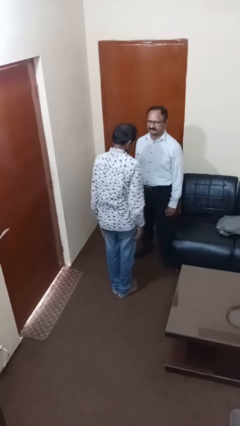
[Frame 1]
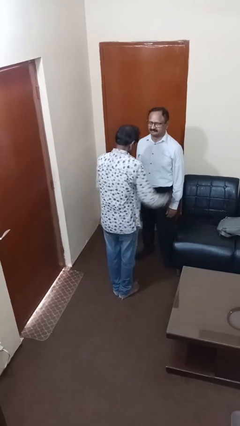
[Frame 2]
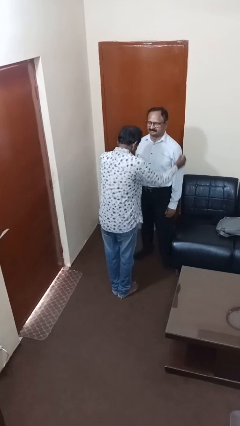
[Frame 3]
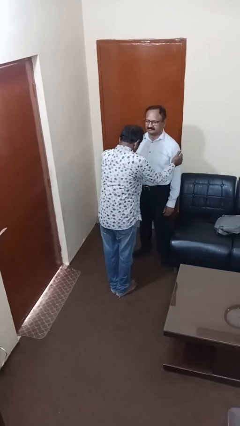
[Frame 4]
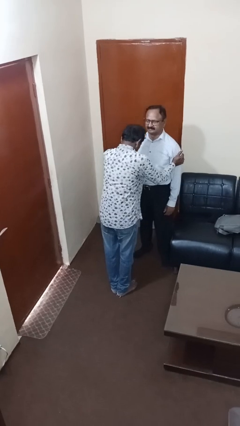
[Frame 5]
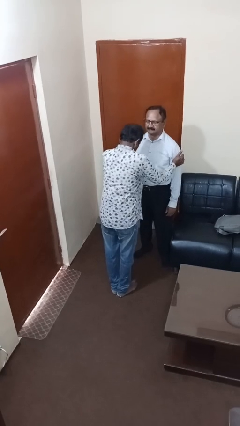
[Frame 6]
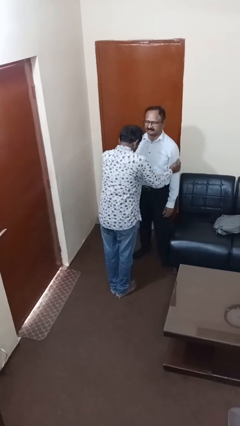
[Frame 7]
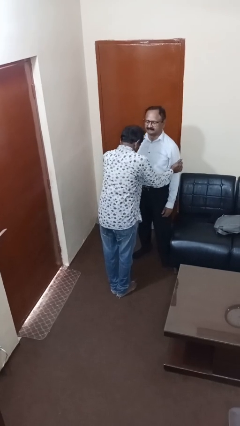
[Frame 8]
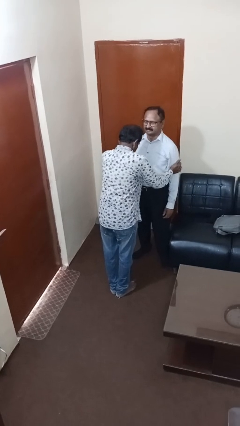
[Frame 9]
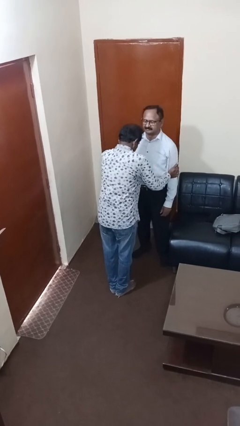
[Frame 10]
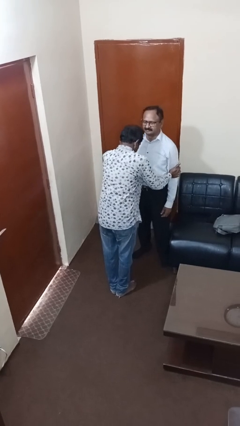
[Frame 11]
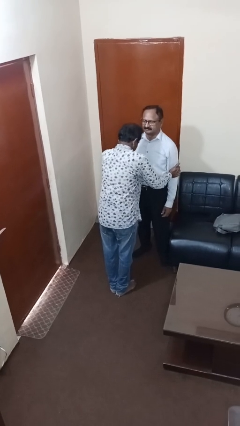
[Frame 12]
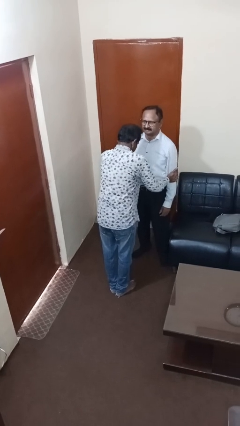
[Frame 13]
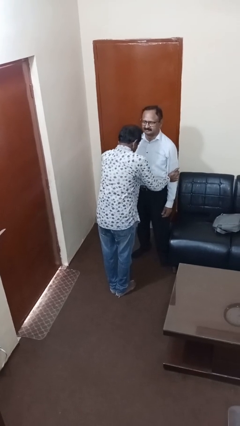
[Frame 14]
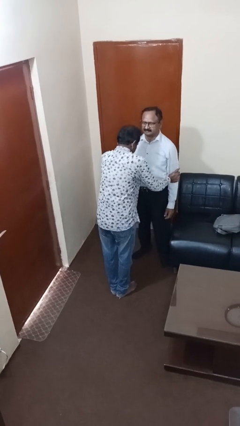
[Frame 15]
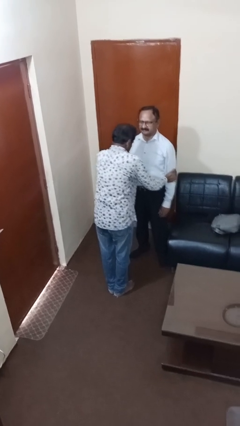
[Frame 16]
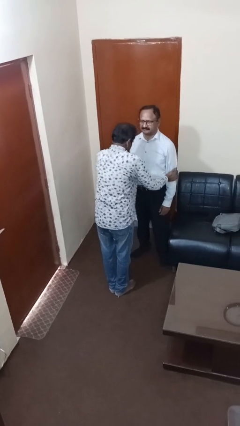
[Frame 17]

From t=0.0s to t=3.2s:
person grabs person by bicep

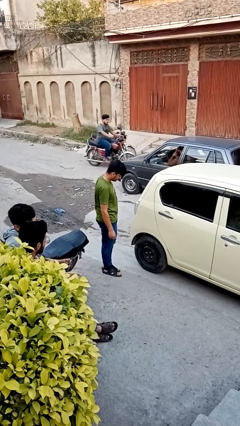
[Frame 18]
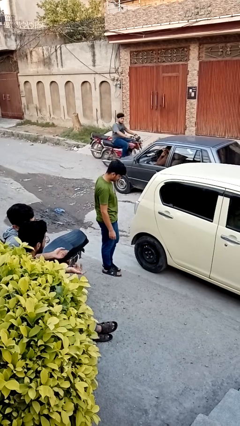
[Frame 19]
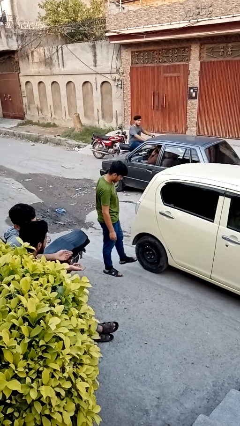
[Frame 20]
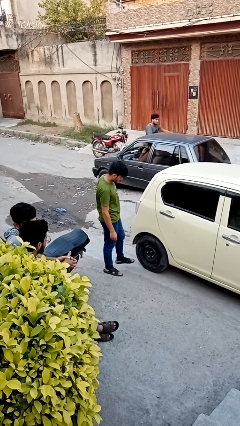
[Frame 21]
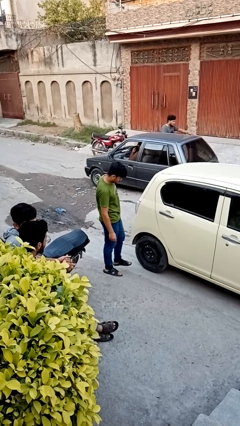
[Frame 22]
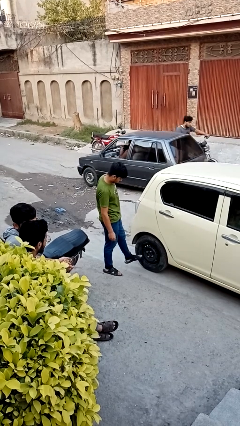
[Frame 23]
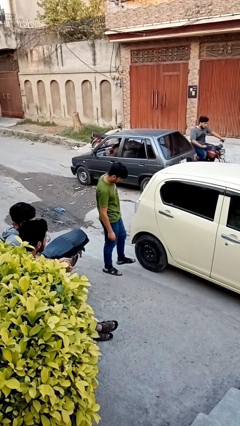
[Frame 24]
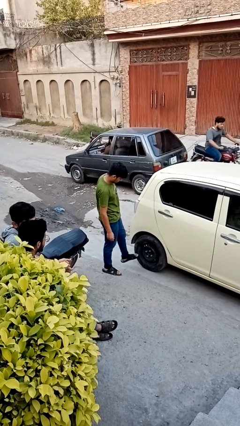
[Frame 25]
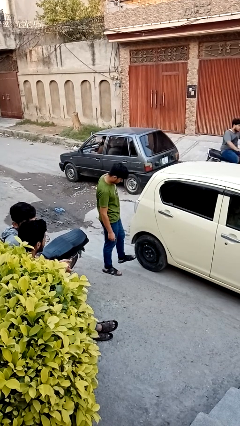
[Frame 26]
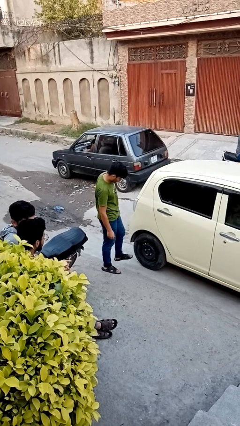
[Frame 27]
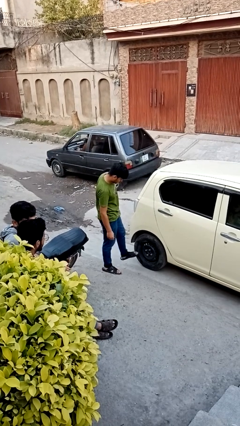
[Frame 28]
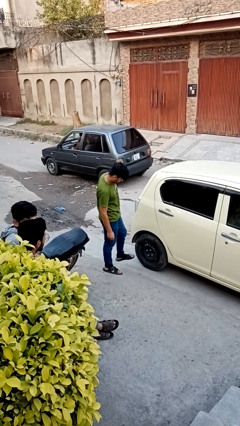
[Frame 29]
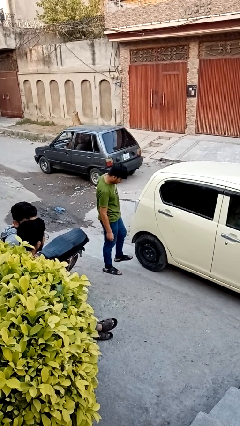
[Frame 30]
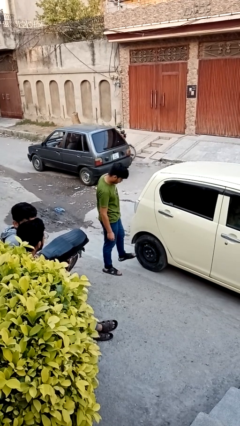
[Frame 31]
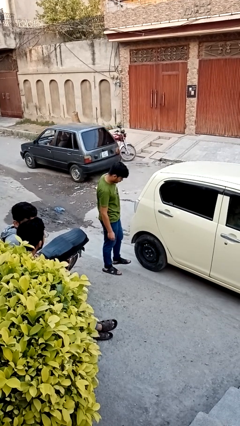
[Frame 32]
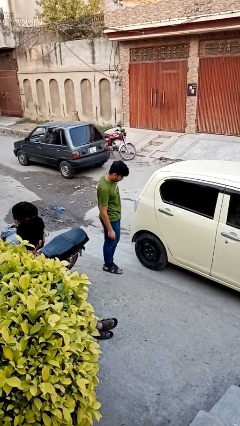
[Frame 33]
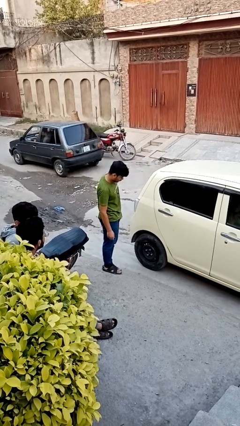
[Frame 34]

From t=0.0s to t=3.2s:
person kicks car tires

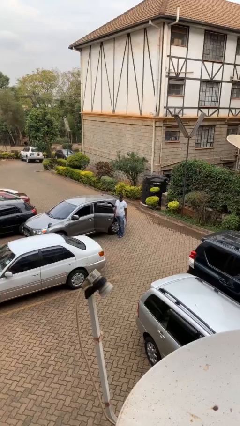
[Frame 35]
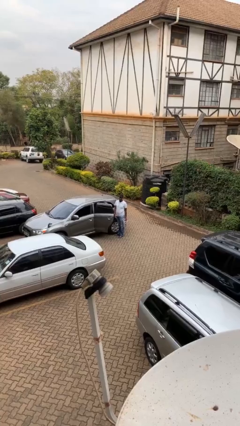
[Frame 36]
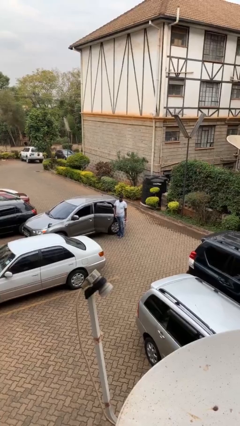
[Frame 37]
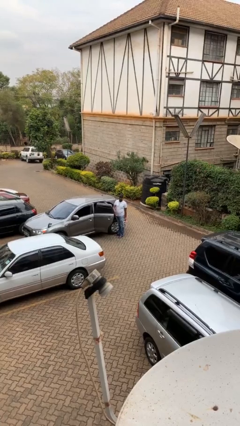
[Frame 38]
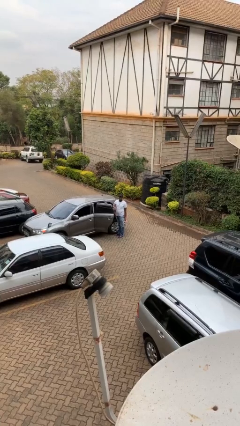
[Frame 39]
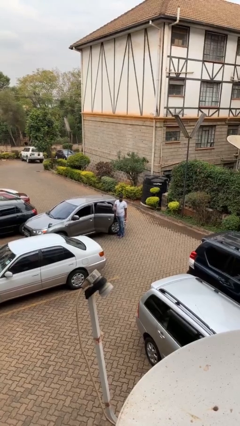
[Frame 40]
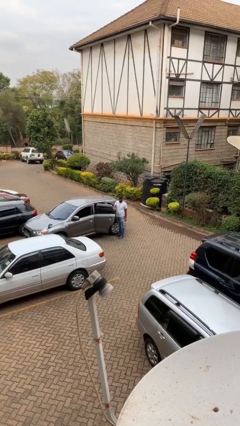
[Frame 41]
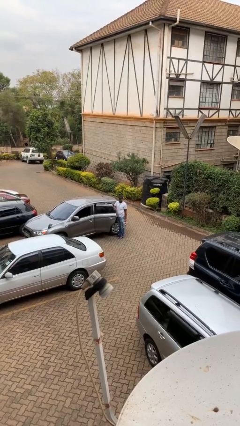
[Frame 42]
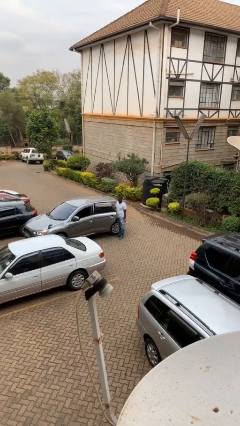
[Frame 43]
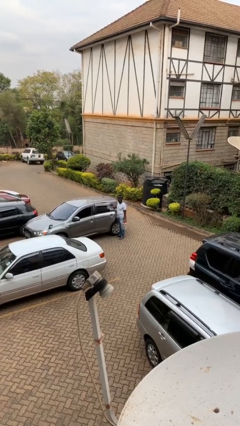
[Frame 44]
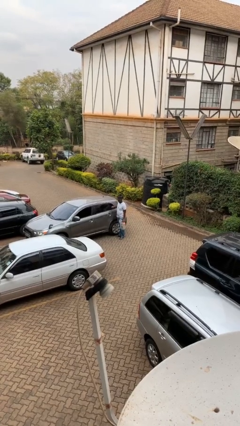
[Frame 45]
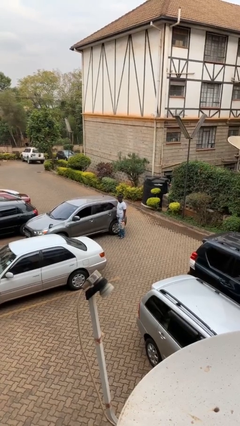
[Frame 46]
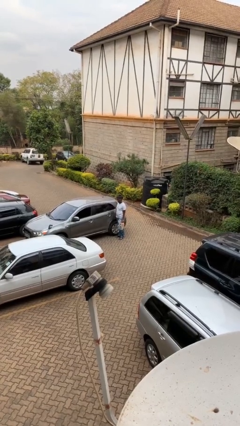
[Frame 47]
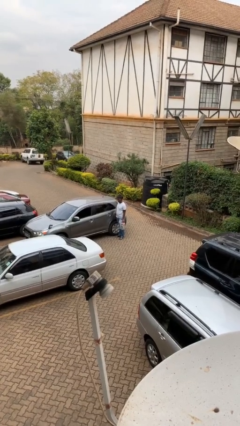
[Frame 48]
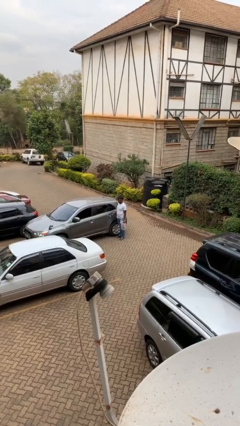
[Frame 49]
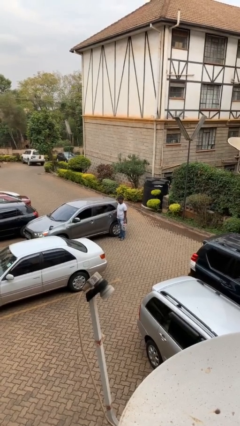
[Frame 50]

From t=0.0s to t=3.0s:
person closes car door

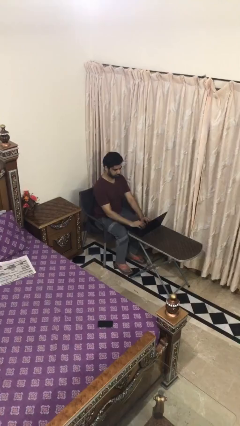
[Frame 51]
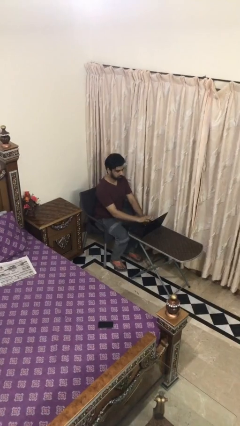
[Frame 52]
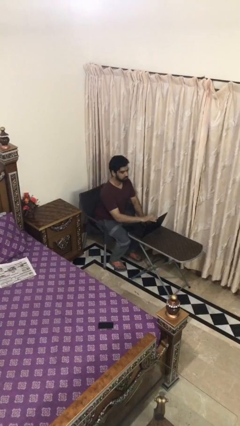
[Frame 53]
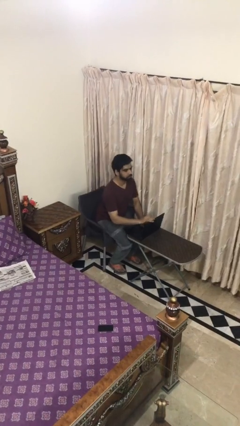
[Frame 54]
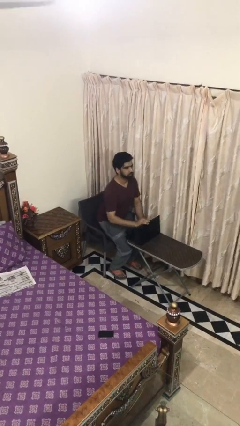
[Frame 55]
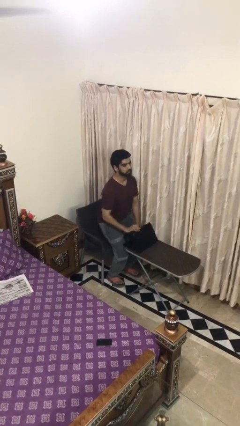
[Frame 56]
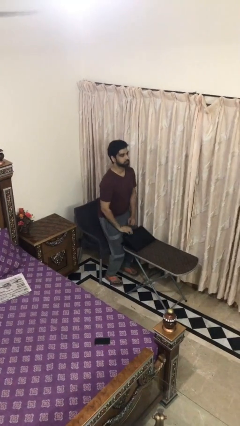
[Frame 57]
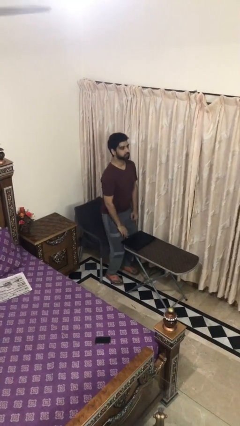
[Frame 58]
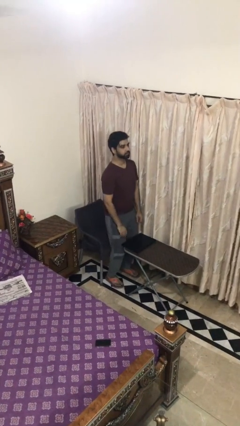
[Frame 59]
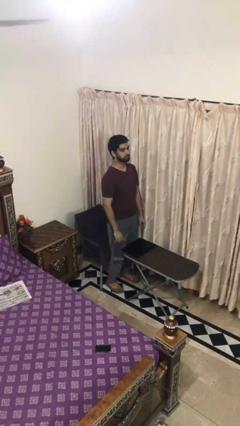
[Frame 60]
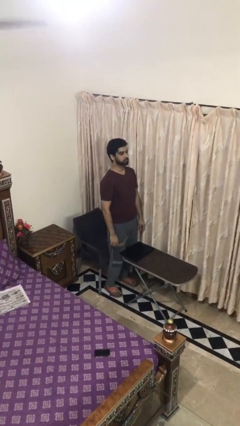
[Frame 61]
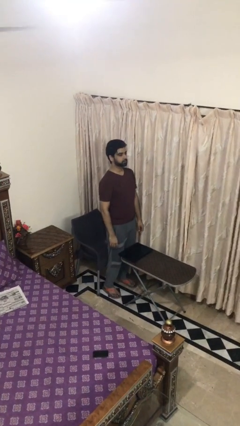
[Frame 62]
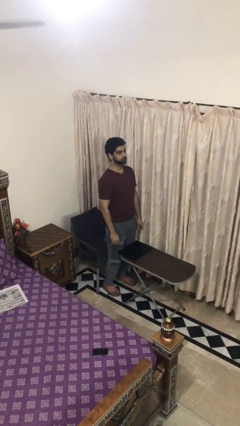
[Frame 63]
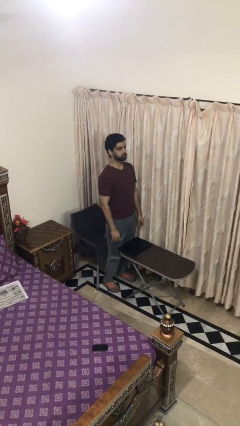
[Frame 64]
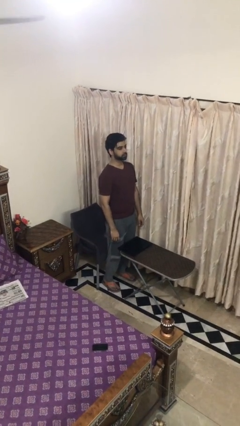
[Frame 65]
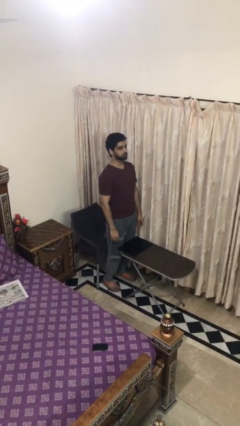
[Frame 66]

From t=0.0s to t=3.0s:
person stands up

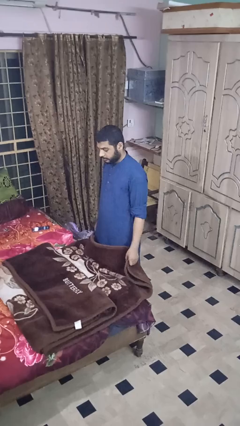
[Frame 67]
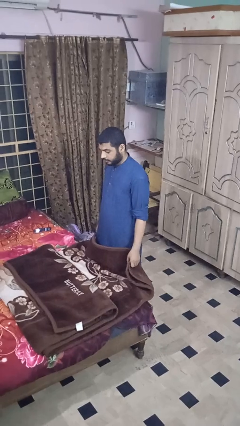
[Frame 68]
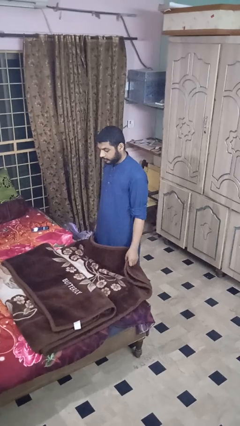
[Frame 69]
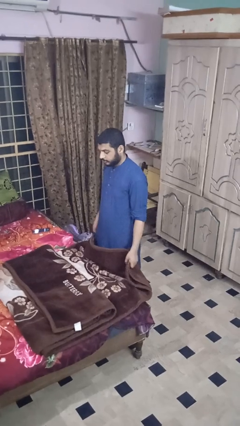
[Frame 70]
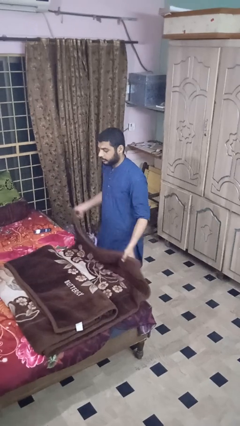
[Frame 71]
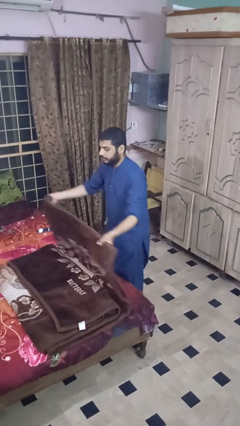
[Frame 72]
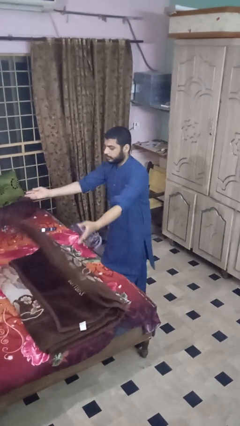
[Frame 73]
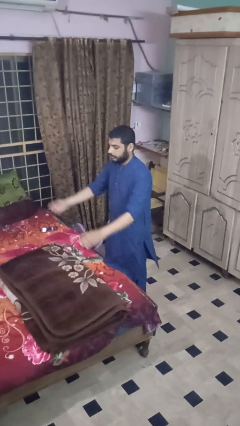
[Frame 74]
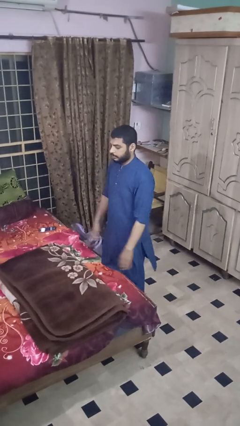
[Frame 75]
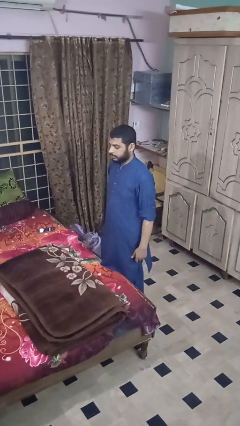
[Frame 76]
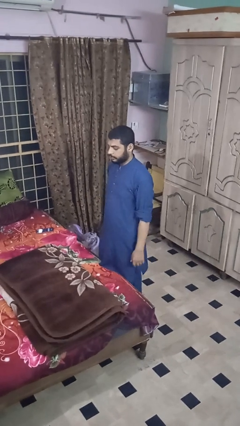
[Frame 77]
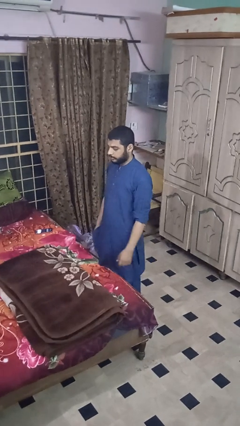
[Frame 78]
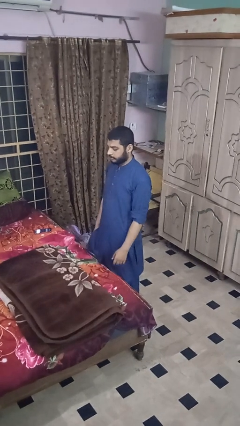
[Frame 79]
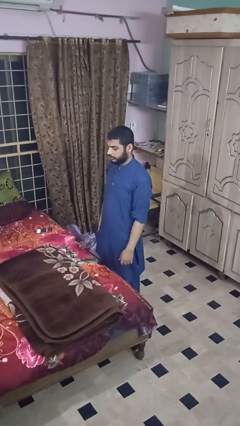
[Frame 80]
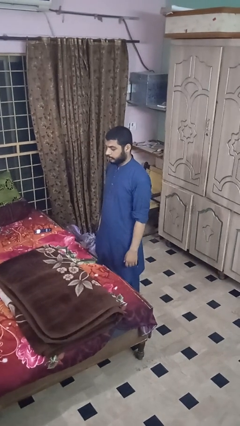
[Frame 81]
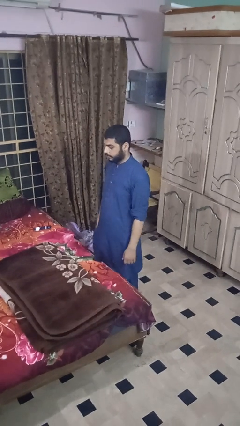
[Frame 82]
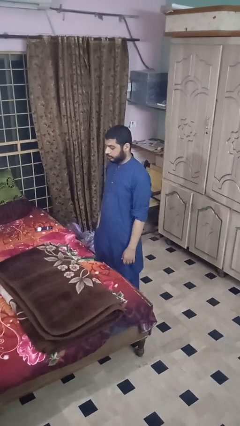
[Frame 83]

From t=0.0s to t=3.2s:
person folds blanket

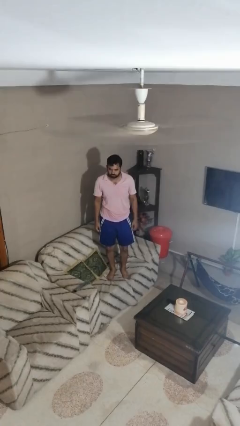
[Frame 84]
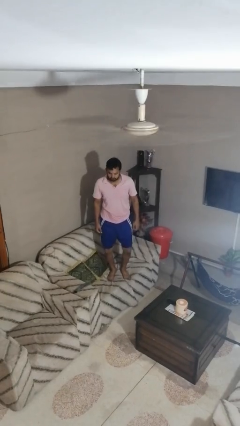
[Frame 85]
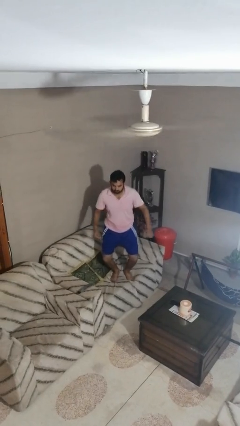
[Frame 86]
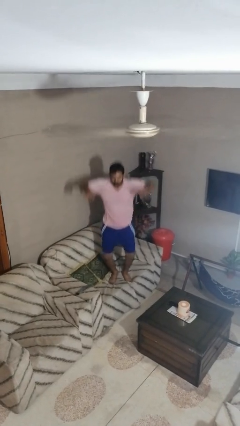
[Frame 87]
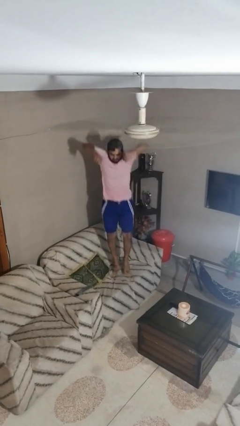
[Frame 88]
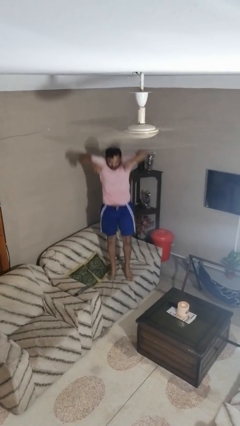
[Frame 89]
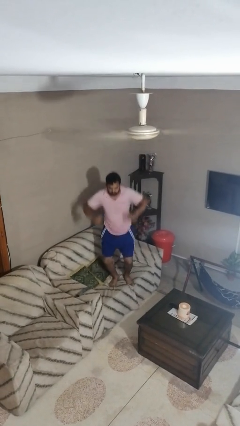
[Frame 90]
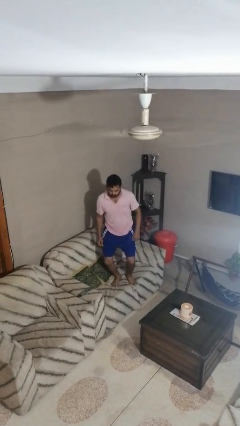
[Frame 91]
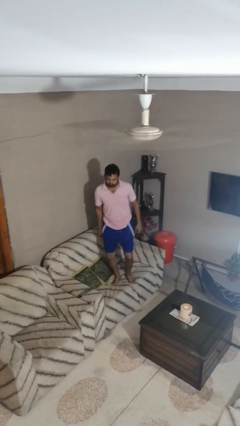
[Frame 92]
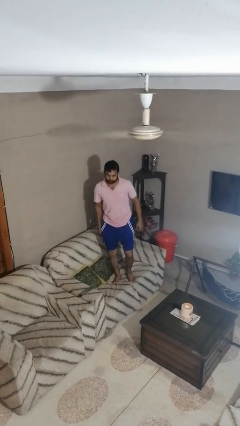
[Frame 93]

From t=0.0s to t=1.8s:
person jumps on couch

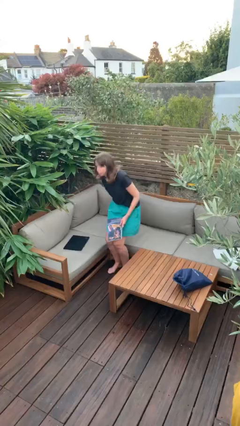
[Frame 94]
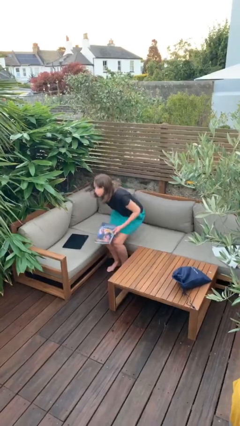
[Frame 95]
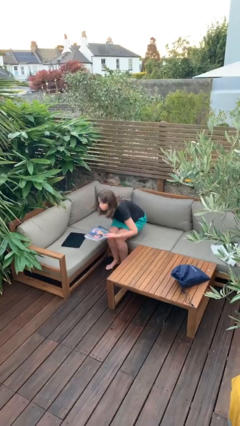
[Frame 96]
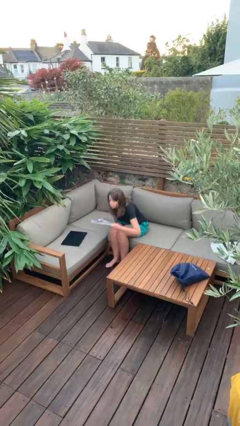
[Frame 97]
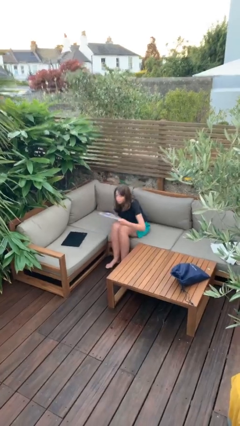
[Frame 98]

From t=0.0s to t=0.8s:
person sits down
